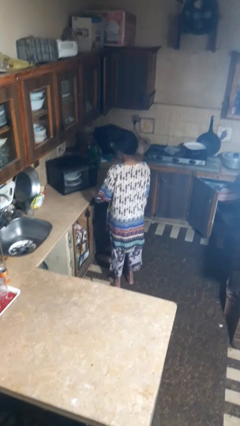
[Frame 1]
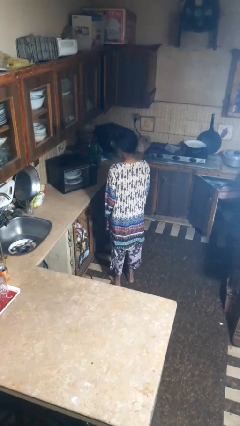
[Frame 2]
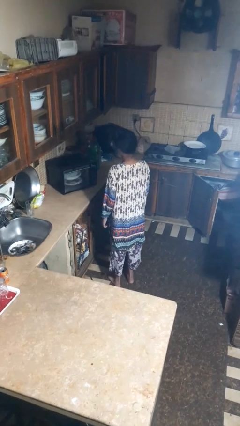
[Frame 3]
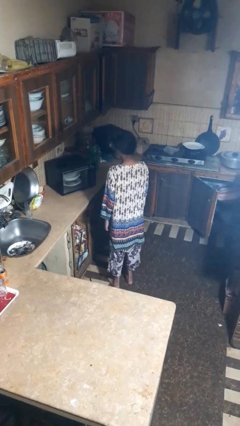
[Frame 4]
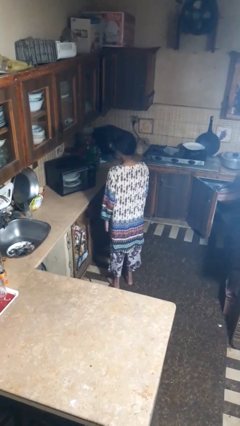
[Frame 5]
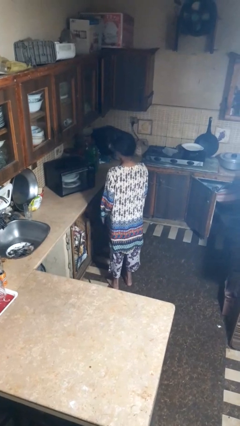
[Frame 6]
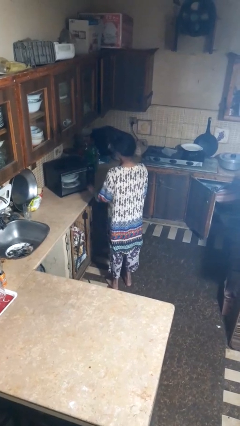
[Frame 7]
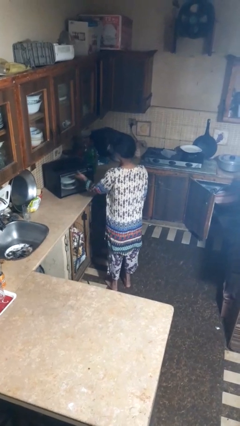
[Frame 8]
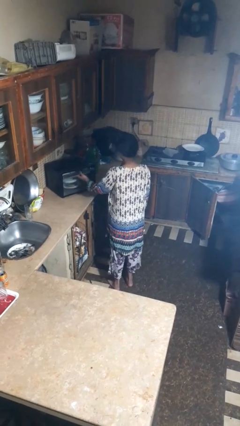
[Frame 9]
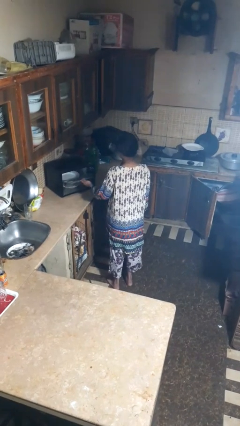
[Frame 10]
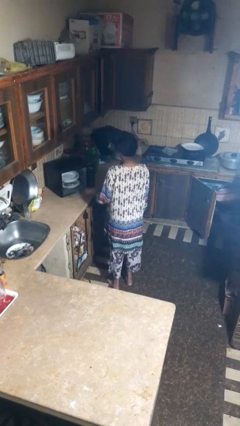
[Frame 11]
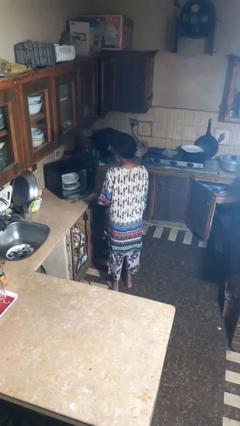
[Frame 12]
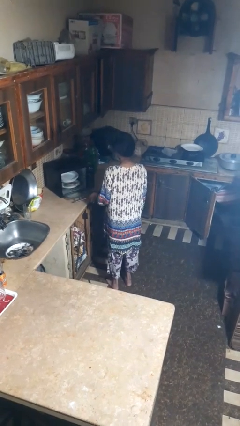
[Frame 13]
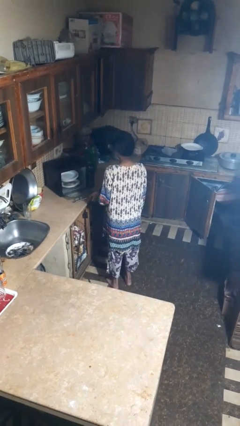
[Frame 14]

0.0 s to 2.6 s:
person opens dishwasher

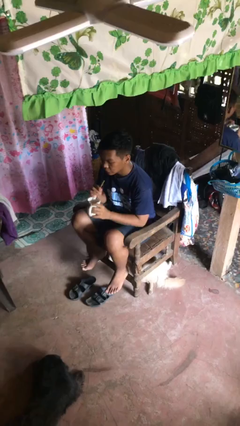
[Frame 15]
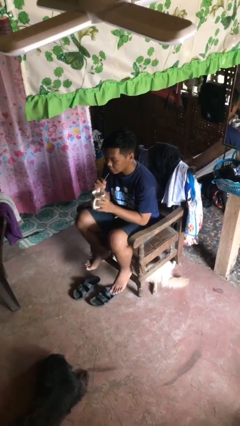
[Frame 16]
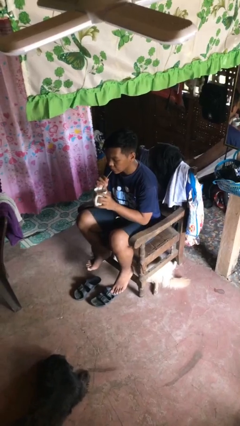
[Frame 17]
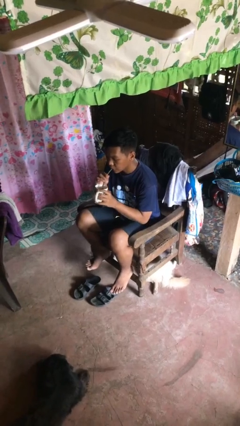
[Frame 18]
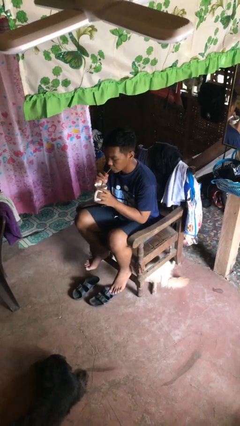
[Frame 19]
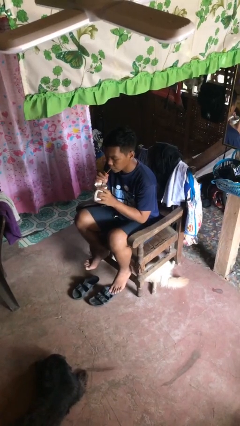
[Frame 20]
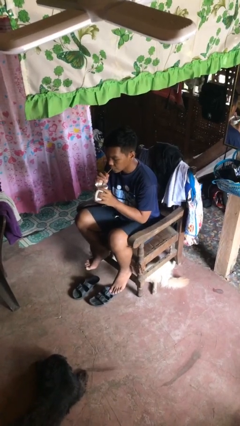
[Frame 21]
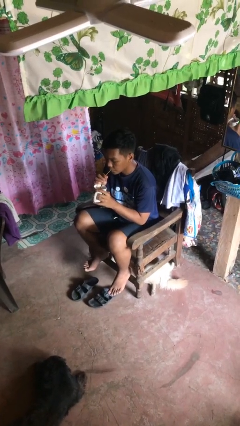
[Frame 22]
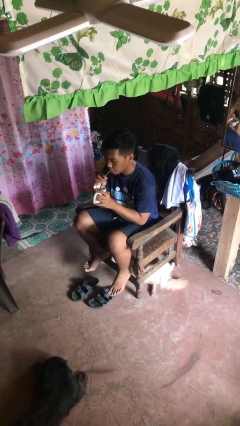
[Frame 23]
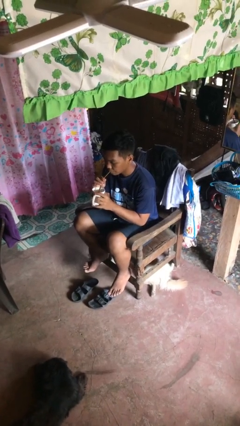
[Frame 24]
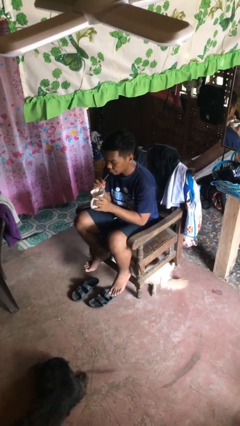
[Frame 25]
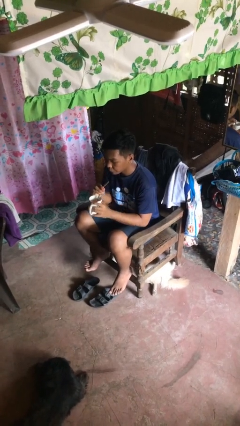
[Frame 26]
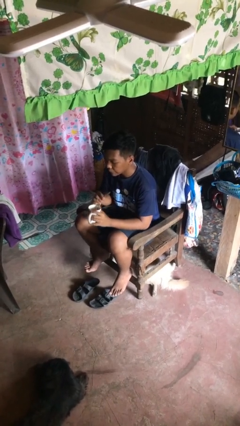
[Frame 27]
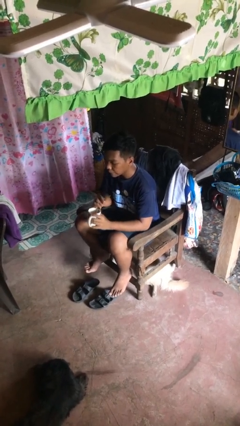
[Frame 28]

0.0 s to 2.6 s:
person drinks from straw

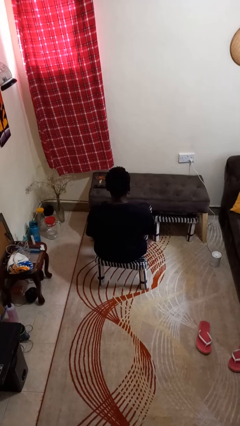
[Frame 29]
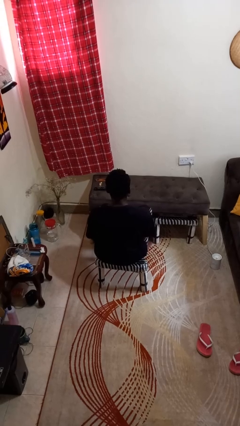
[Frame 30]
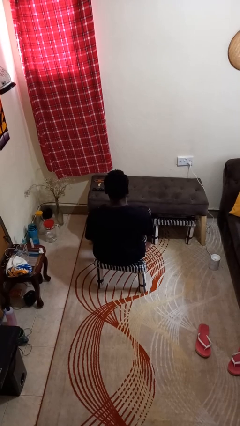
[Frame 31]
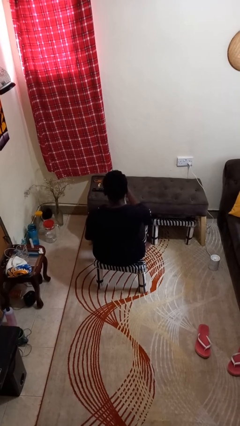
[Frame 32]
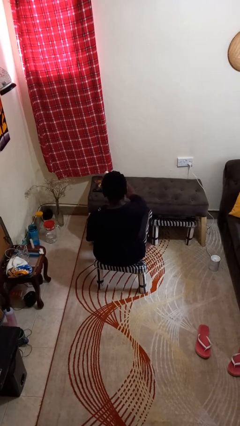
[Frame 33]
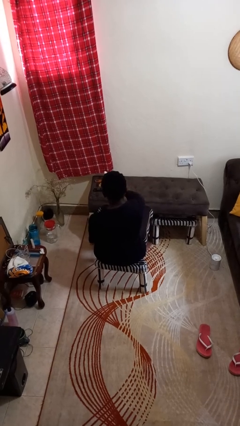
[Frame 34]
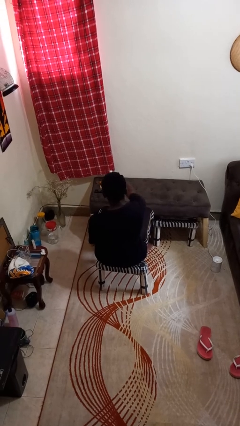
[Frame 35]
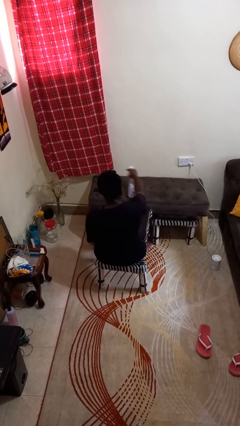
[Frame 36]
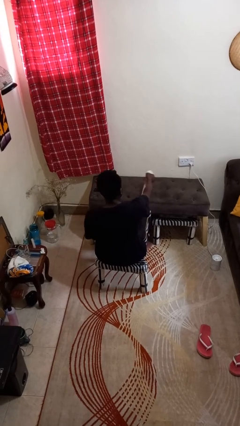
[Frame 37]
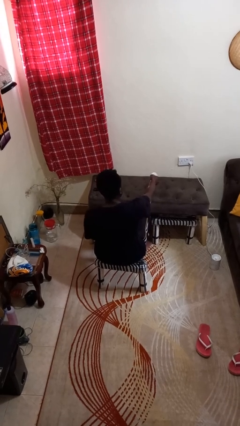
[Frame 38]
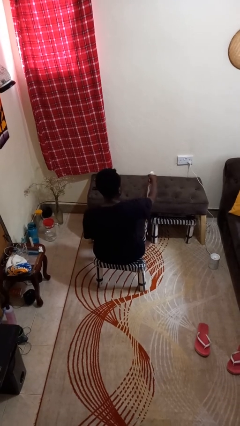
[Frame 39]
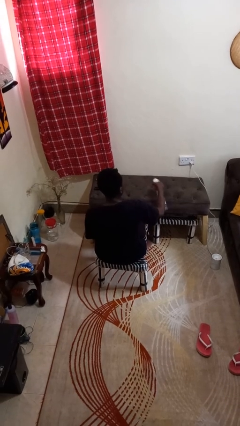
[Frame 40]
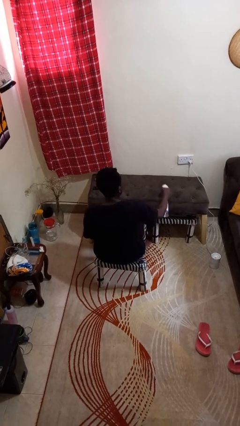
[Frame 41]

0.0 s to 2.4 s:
person sprays from bottle

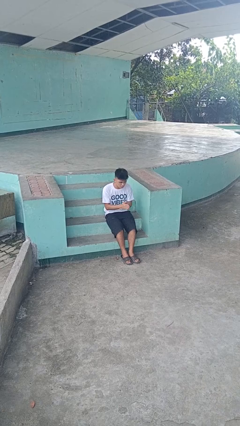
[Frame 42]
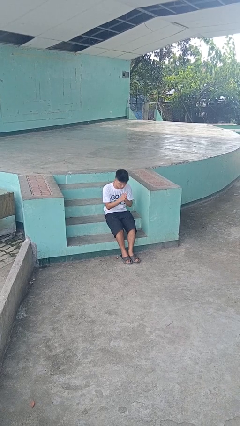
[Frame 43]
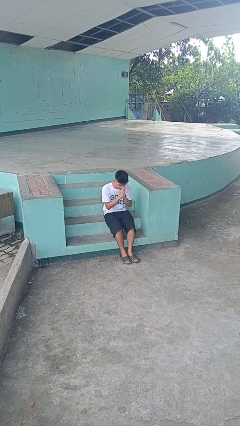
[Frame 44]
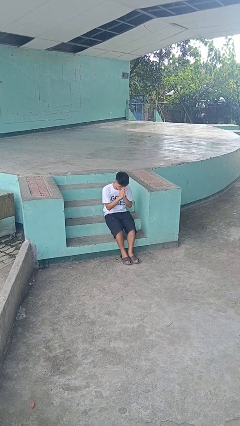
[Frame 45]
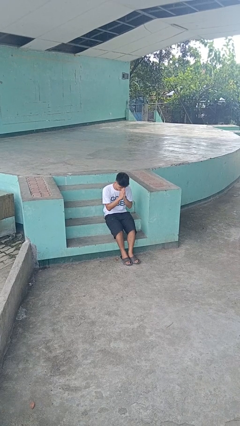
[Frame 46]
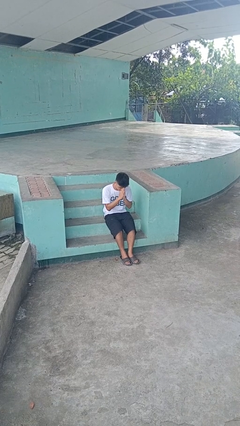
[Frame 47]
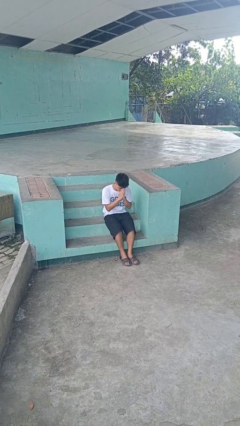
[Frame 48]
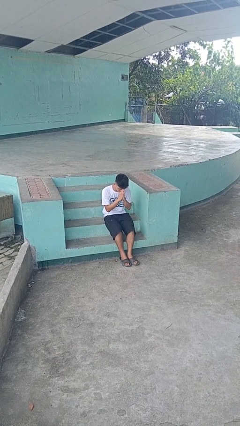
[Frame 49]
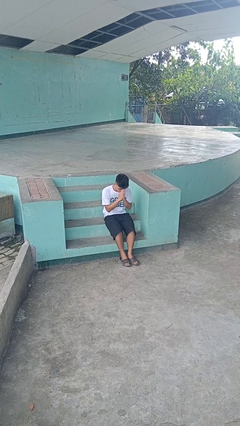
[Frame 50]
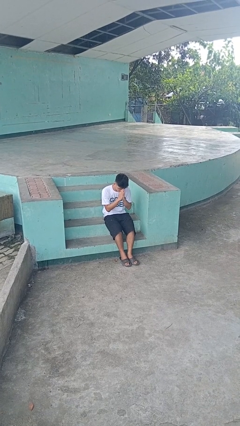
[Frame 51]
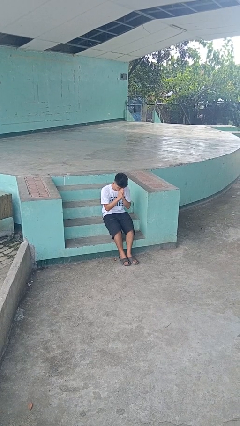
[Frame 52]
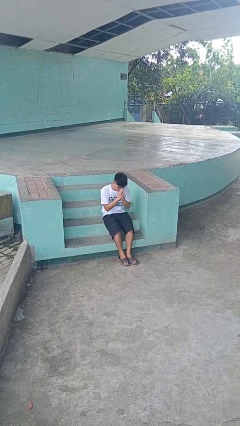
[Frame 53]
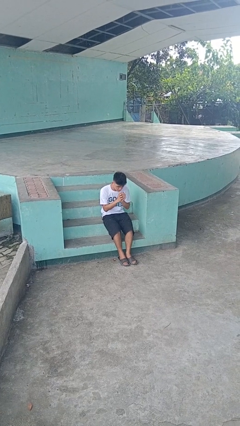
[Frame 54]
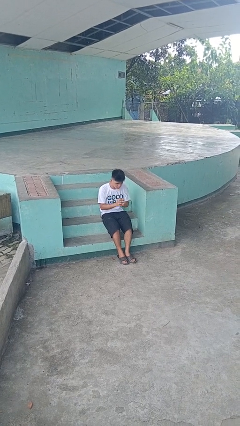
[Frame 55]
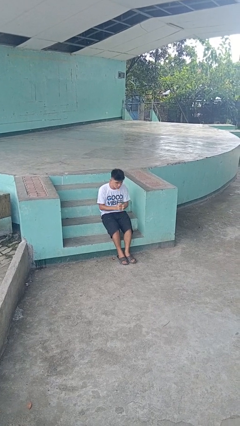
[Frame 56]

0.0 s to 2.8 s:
person prays

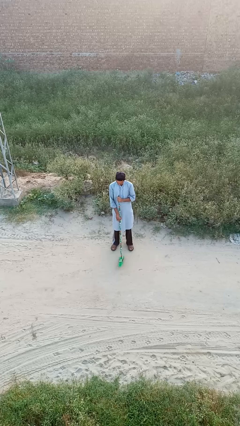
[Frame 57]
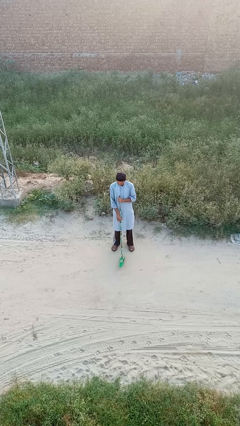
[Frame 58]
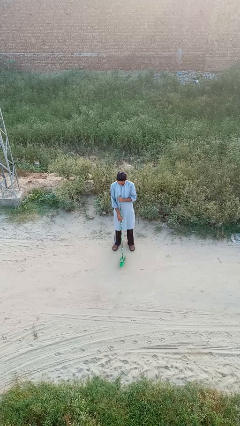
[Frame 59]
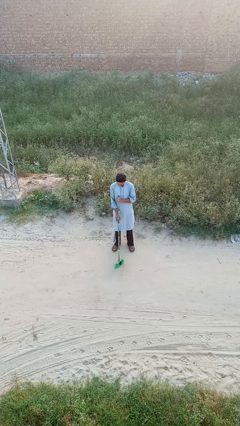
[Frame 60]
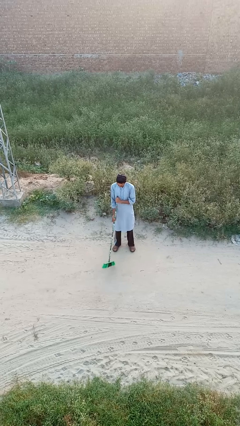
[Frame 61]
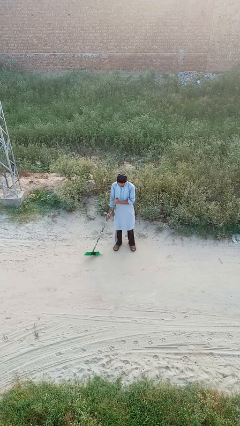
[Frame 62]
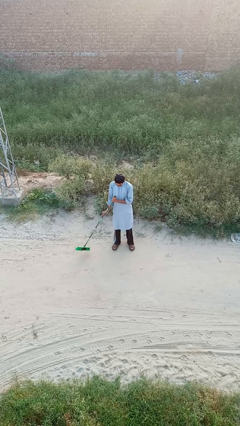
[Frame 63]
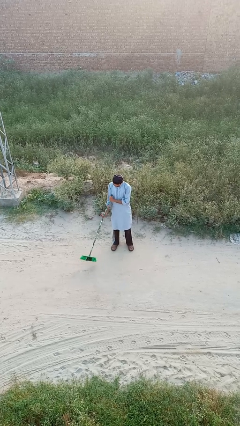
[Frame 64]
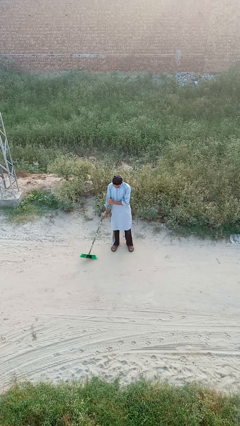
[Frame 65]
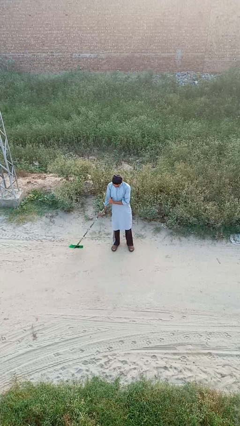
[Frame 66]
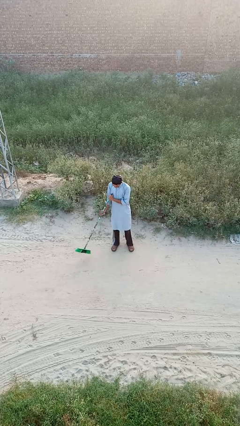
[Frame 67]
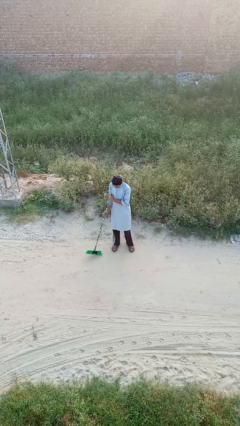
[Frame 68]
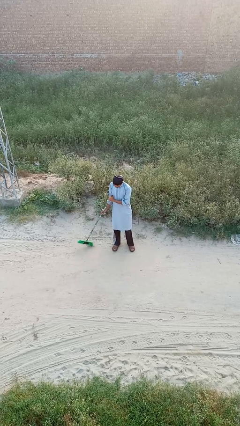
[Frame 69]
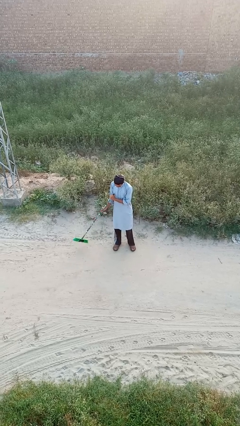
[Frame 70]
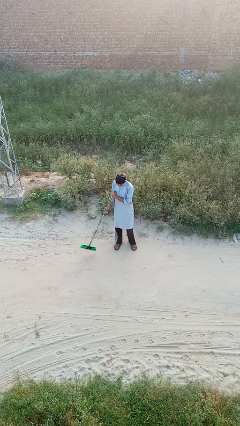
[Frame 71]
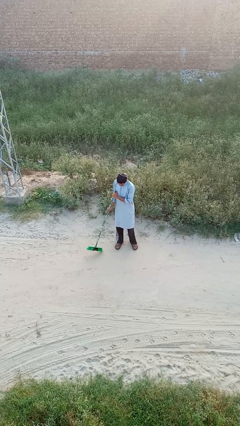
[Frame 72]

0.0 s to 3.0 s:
person sweeps floor

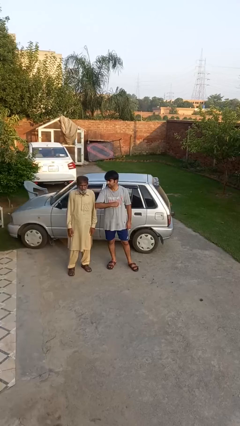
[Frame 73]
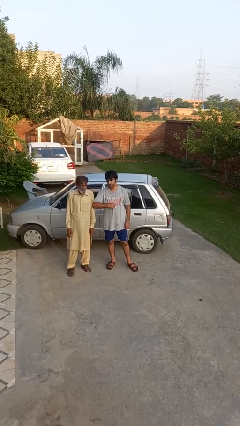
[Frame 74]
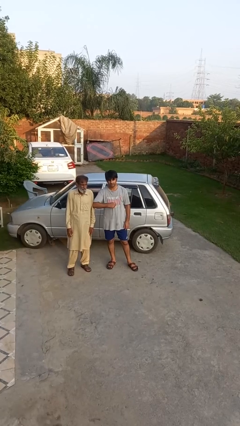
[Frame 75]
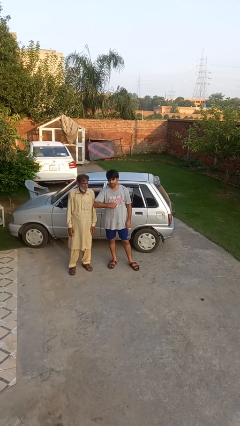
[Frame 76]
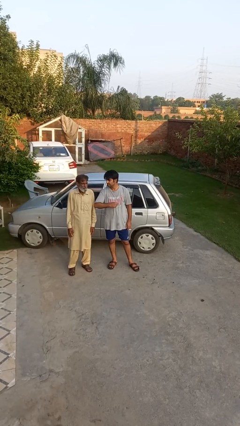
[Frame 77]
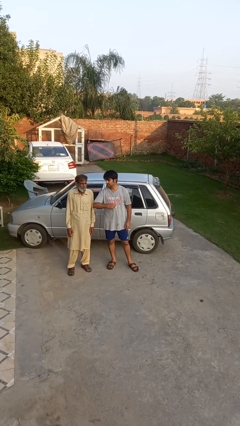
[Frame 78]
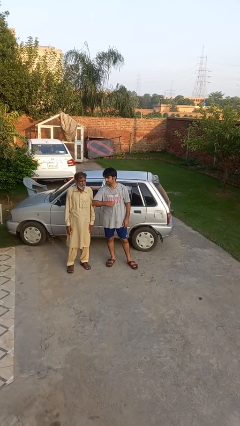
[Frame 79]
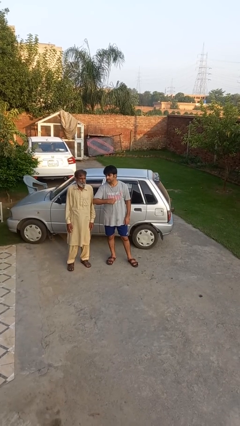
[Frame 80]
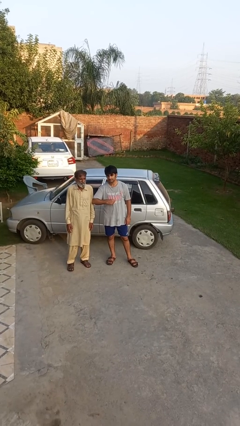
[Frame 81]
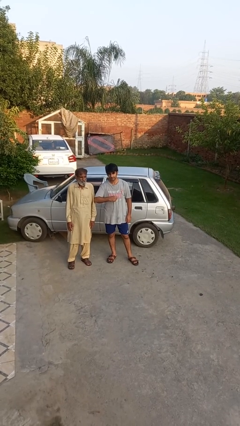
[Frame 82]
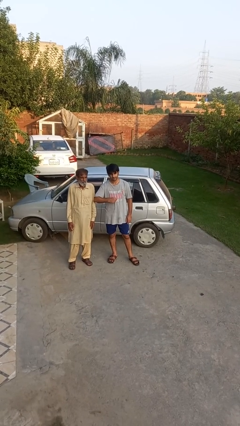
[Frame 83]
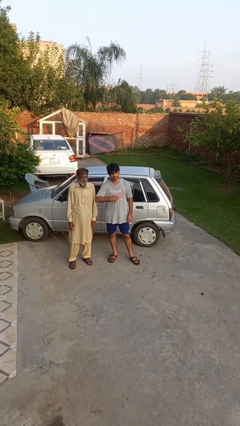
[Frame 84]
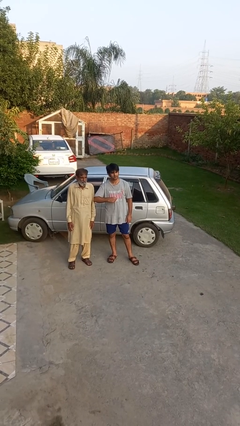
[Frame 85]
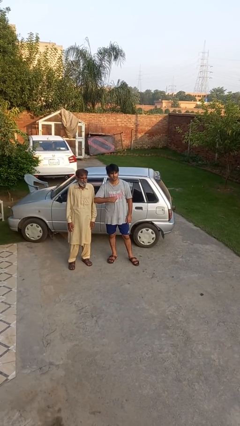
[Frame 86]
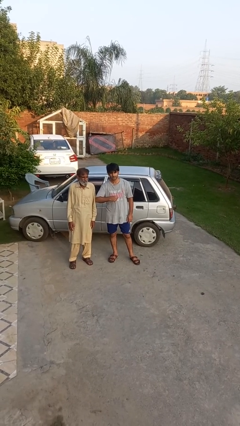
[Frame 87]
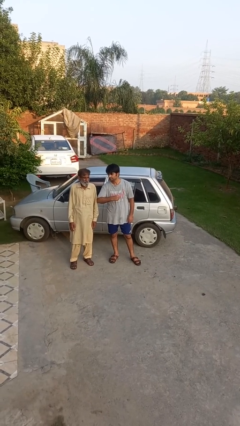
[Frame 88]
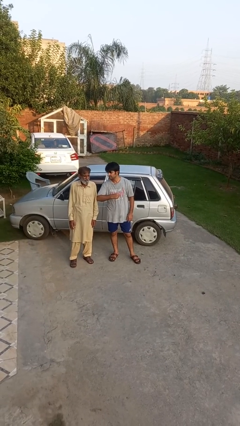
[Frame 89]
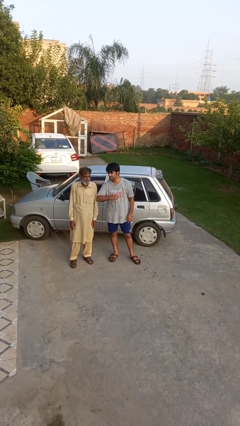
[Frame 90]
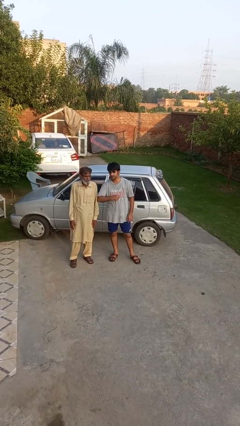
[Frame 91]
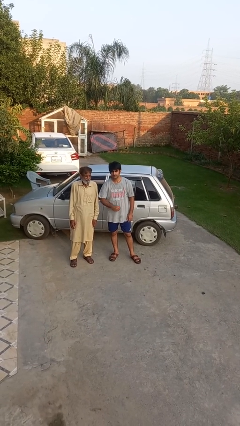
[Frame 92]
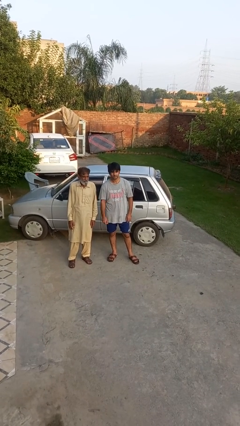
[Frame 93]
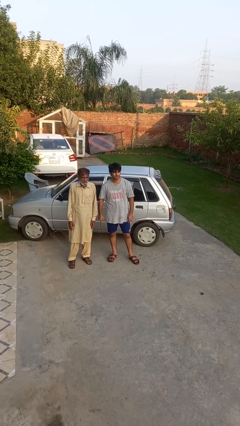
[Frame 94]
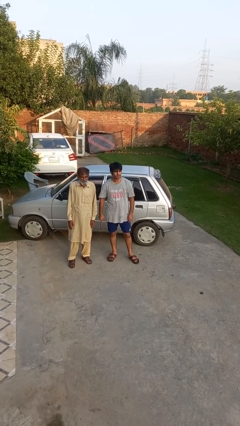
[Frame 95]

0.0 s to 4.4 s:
person nudges person with elbow
